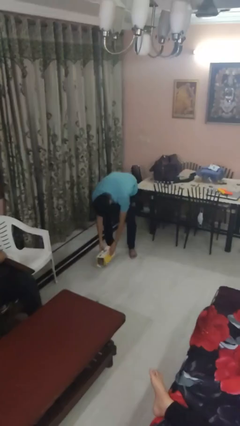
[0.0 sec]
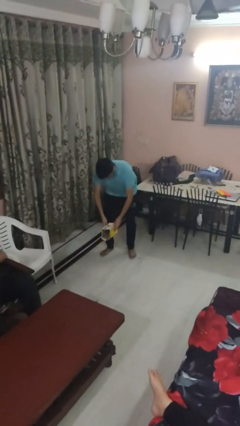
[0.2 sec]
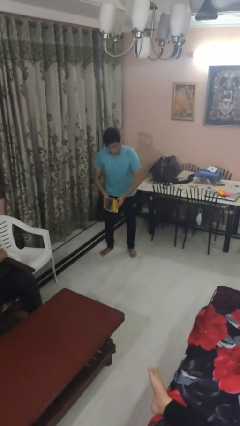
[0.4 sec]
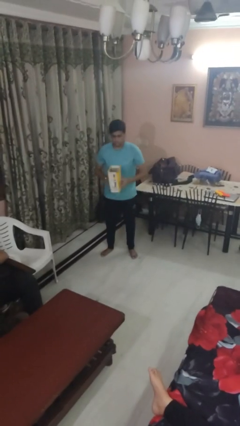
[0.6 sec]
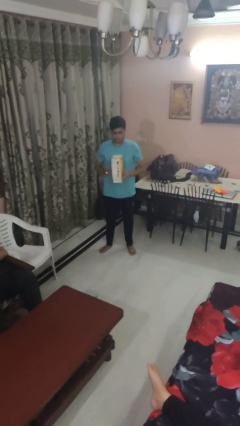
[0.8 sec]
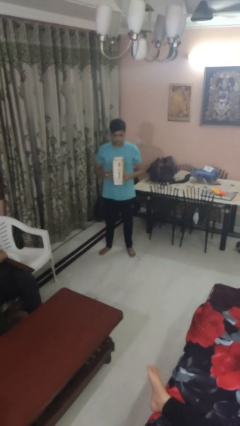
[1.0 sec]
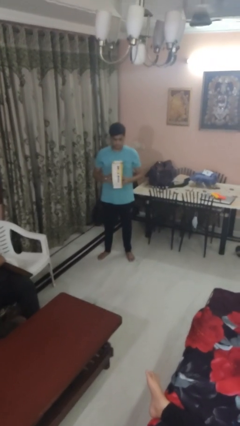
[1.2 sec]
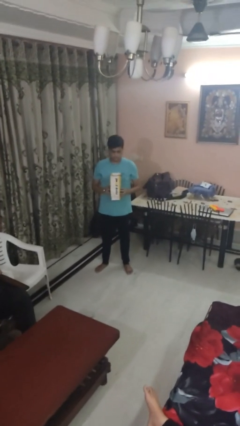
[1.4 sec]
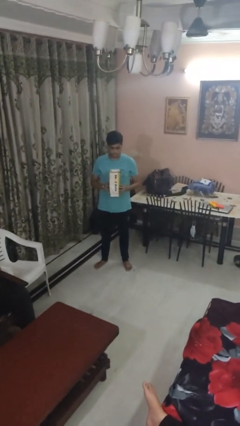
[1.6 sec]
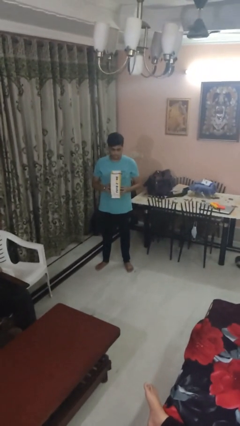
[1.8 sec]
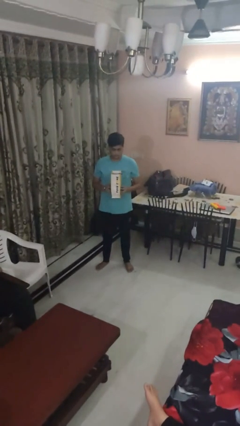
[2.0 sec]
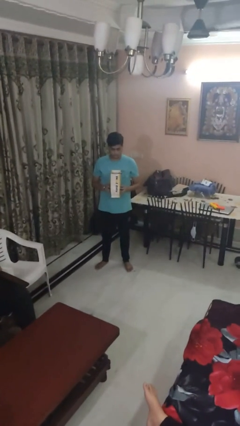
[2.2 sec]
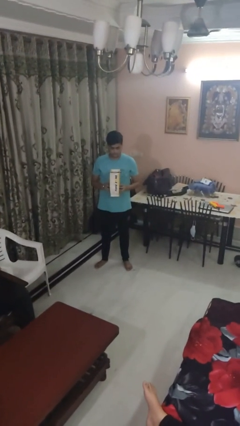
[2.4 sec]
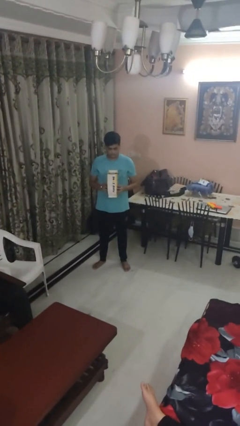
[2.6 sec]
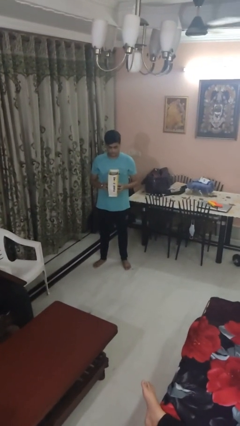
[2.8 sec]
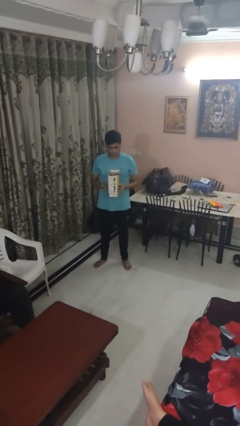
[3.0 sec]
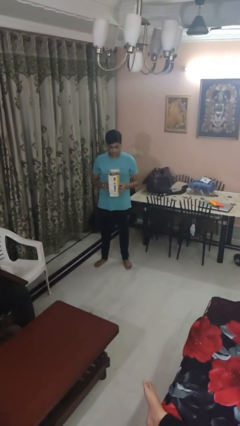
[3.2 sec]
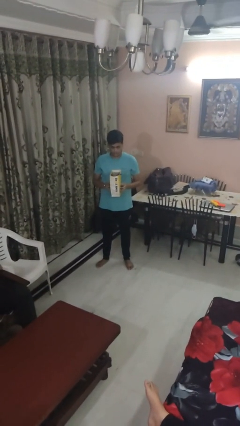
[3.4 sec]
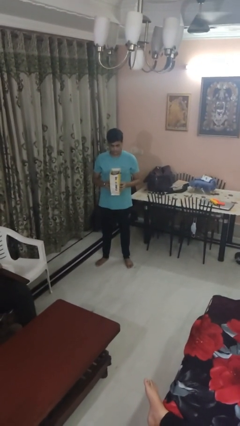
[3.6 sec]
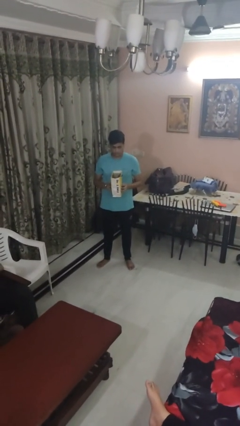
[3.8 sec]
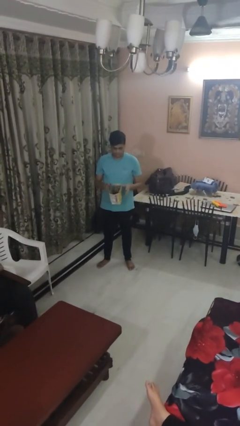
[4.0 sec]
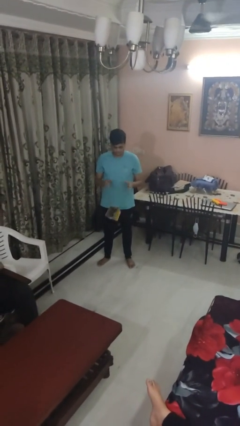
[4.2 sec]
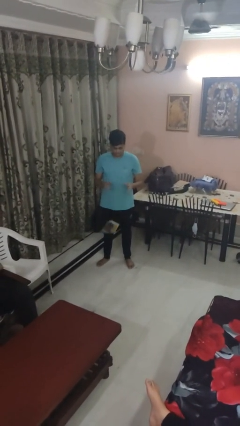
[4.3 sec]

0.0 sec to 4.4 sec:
person picks up object from floor

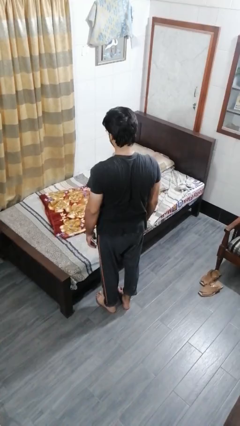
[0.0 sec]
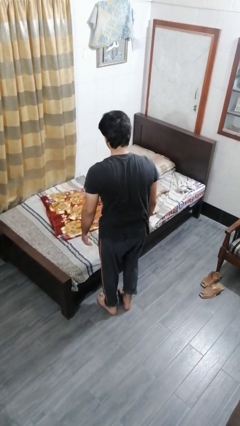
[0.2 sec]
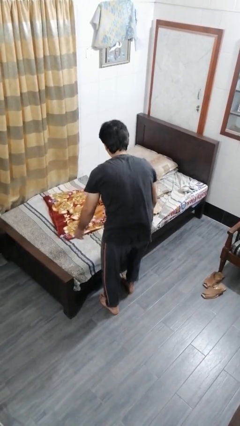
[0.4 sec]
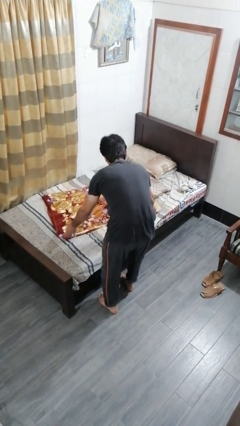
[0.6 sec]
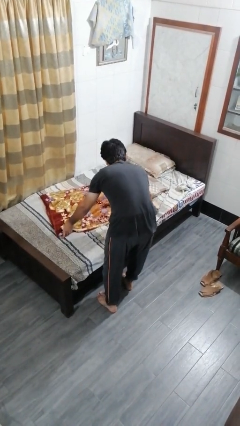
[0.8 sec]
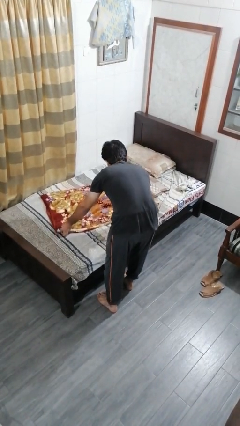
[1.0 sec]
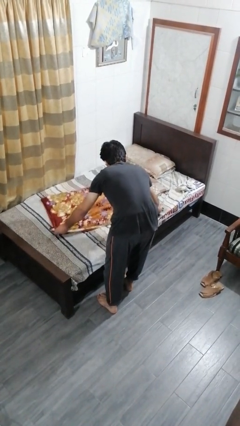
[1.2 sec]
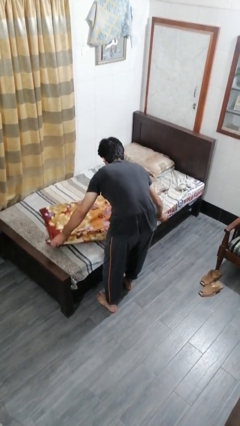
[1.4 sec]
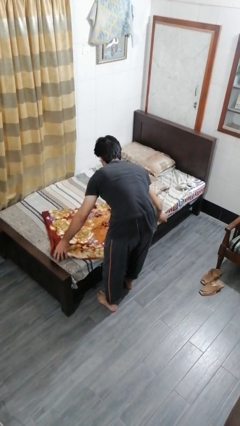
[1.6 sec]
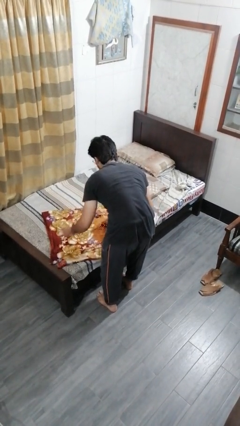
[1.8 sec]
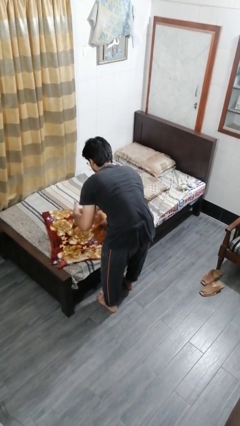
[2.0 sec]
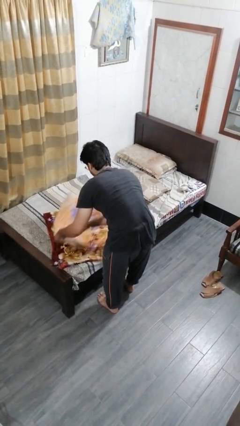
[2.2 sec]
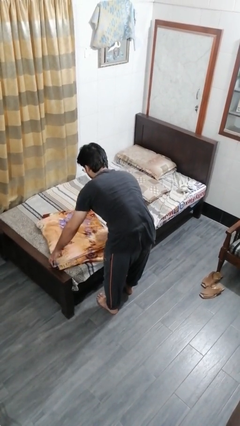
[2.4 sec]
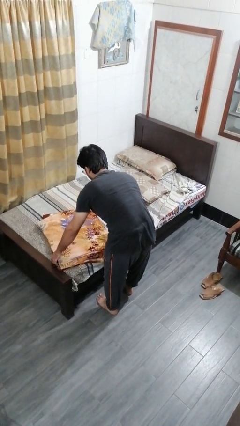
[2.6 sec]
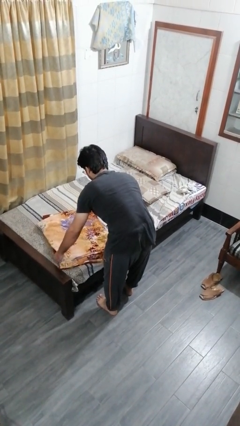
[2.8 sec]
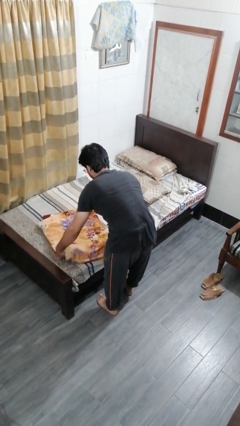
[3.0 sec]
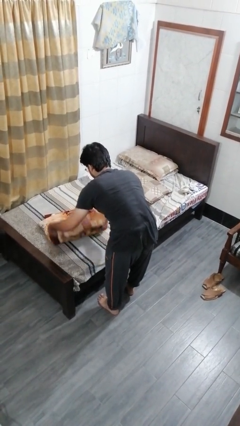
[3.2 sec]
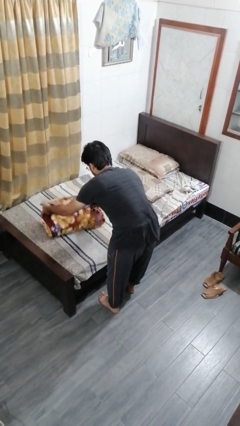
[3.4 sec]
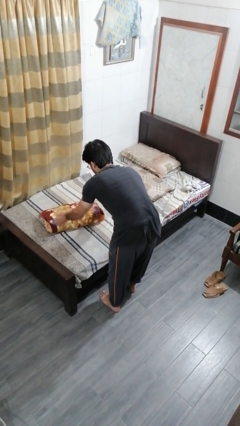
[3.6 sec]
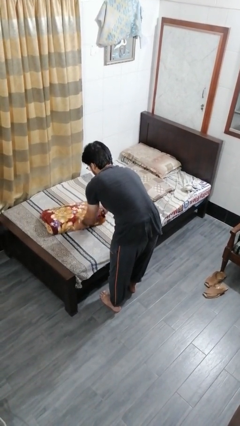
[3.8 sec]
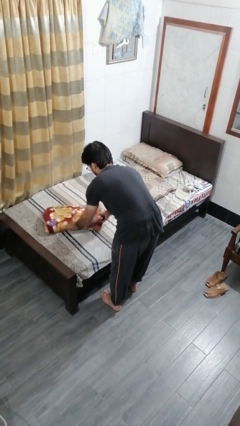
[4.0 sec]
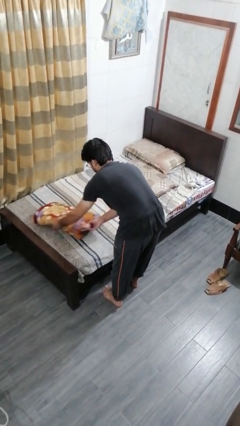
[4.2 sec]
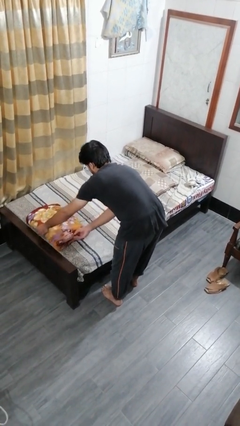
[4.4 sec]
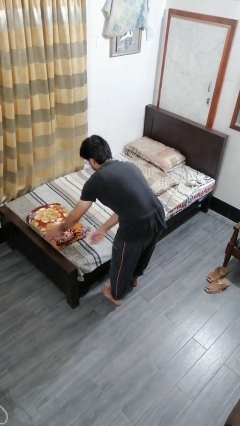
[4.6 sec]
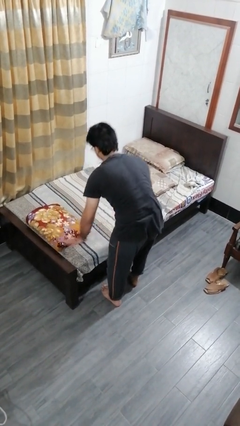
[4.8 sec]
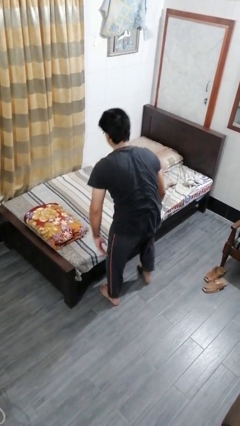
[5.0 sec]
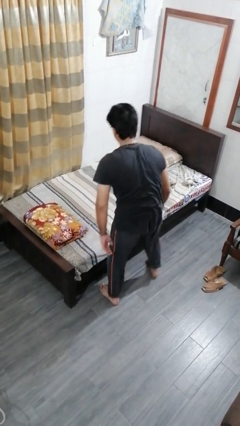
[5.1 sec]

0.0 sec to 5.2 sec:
person makes bed

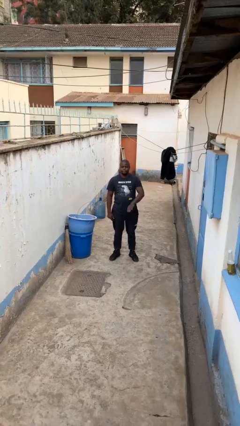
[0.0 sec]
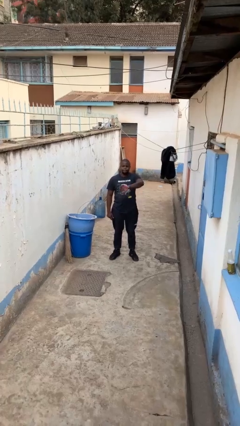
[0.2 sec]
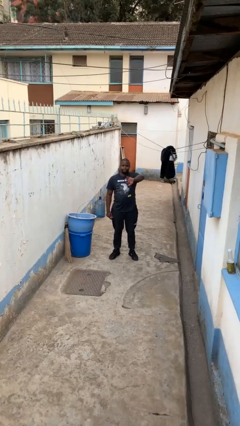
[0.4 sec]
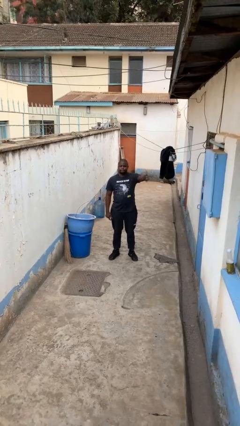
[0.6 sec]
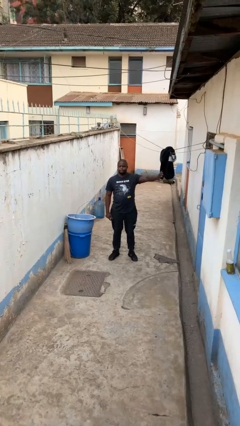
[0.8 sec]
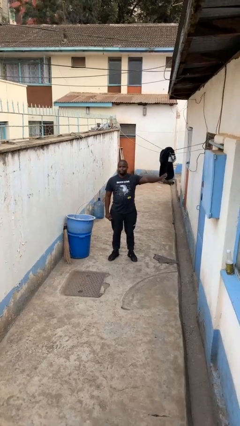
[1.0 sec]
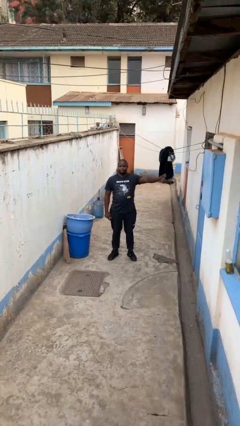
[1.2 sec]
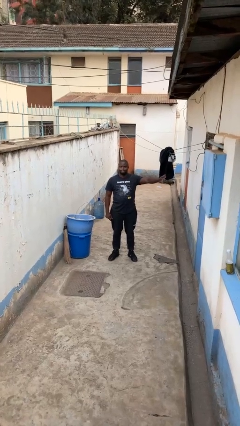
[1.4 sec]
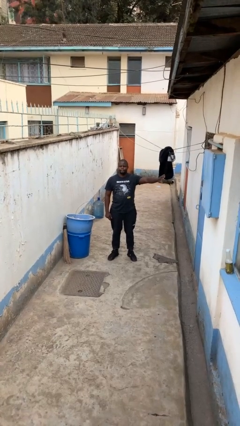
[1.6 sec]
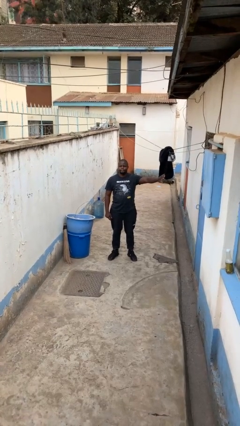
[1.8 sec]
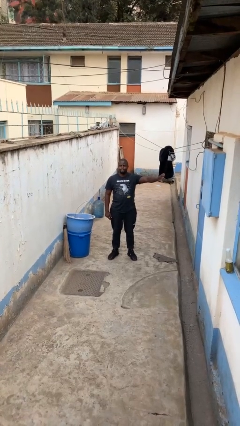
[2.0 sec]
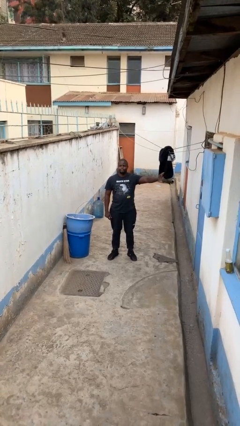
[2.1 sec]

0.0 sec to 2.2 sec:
person gestures swipe left

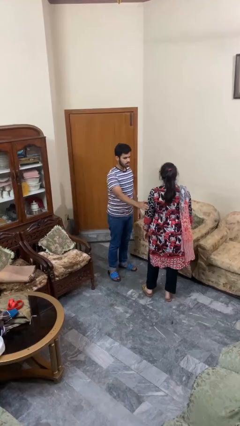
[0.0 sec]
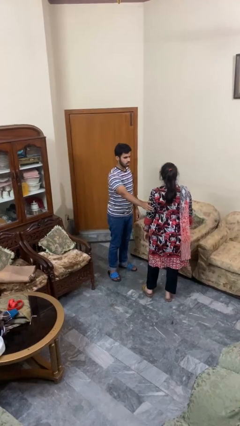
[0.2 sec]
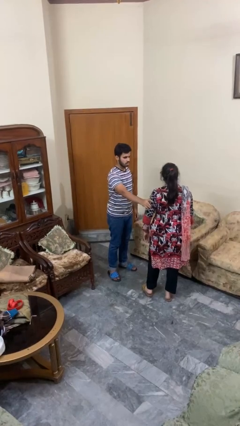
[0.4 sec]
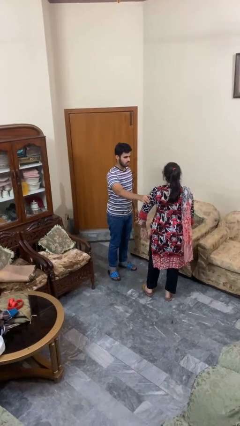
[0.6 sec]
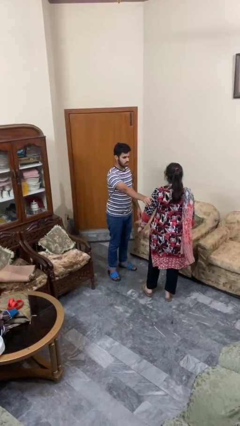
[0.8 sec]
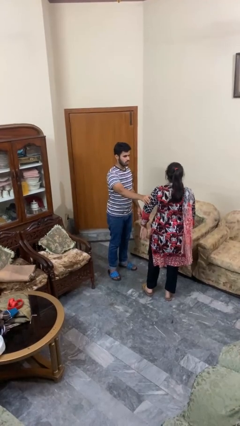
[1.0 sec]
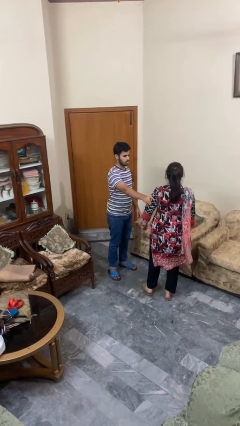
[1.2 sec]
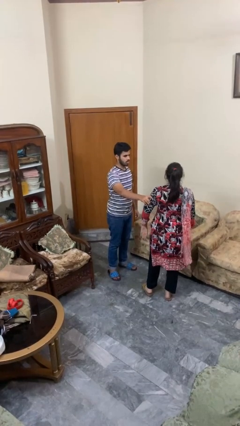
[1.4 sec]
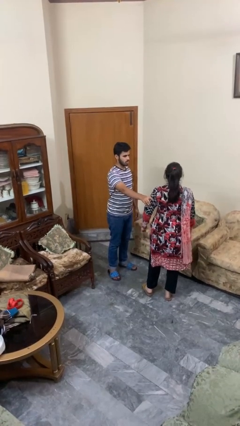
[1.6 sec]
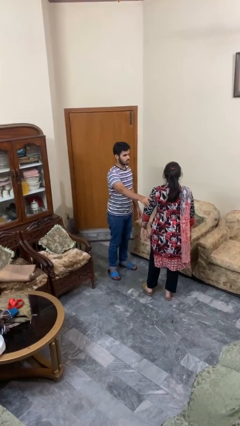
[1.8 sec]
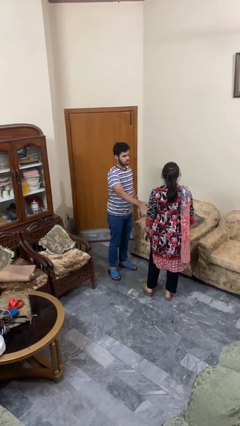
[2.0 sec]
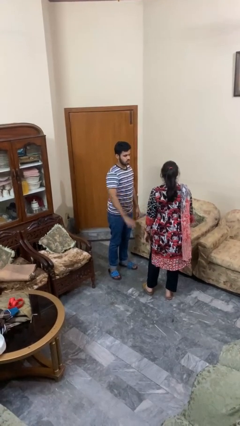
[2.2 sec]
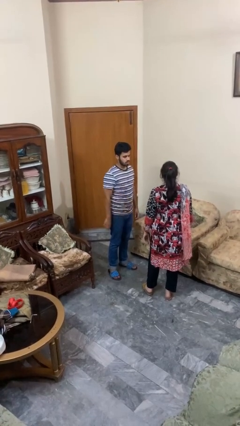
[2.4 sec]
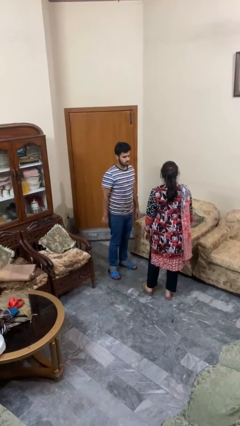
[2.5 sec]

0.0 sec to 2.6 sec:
person grabs person by bicep

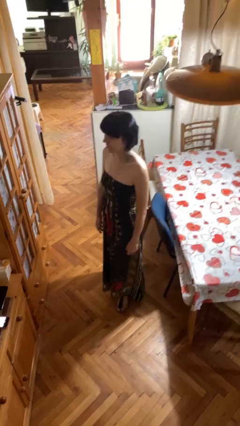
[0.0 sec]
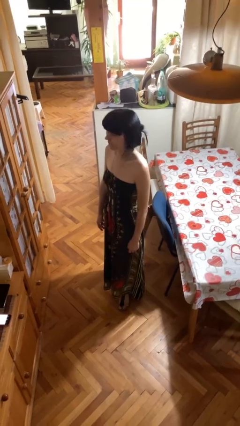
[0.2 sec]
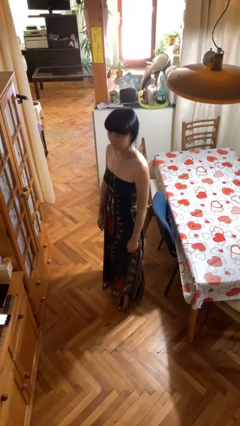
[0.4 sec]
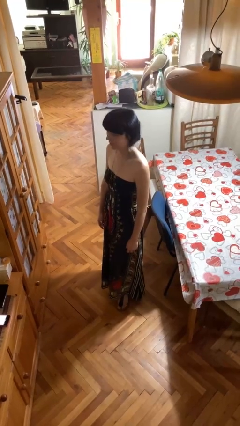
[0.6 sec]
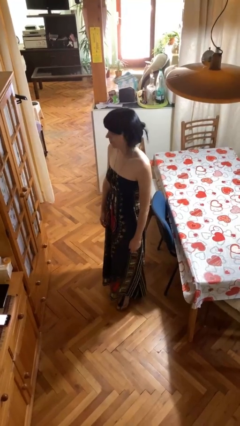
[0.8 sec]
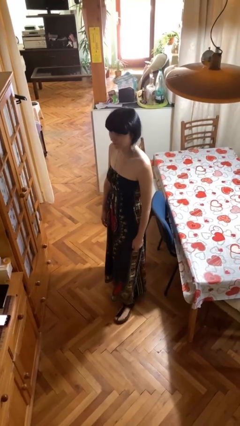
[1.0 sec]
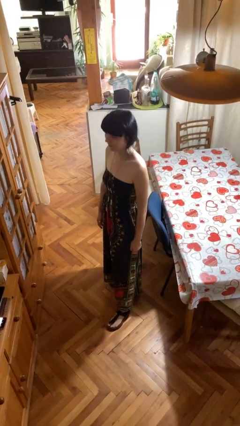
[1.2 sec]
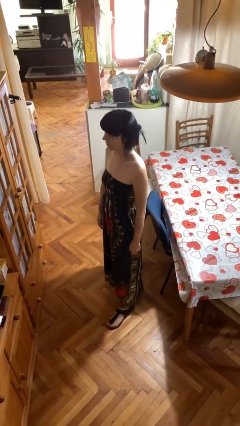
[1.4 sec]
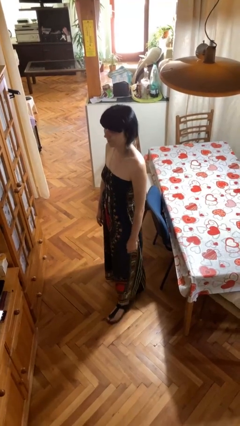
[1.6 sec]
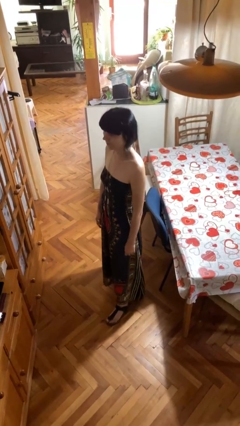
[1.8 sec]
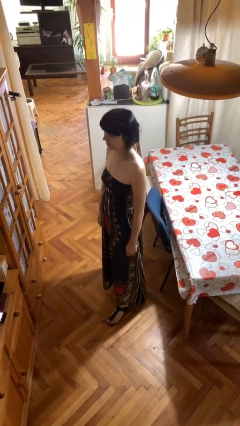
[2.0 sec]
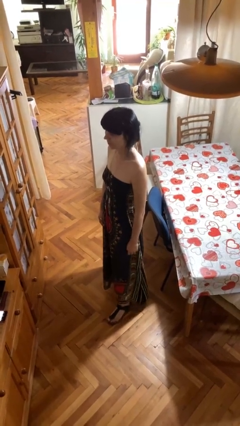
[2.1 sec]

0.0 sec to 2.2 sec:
person shakes head

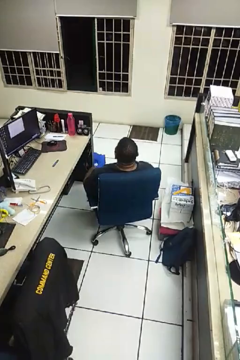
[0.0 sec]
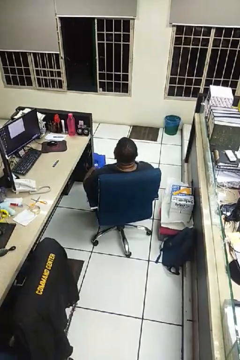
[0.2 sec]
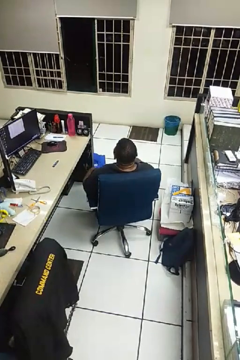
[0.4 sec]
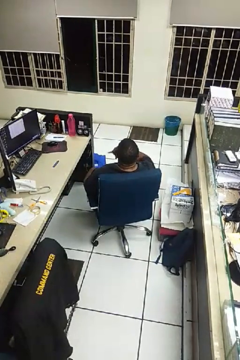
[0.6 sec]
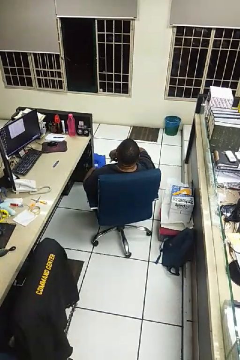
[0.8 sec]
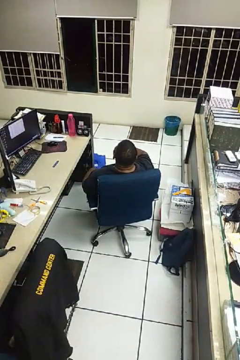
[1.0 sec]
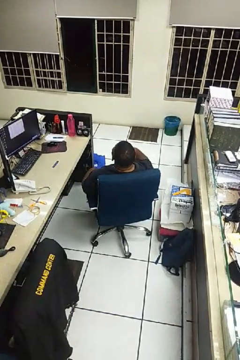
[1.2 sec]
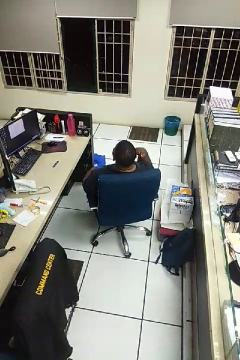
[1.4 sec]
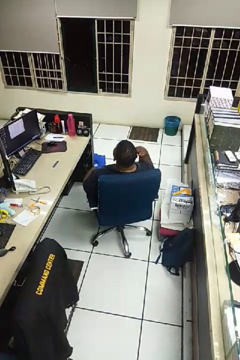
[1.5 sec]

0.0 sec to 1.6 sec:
person gestures cut
